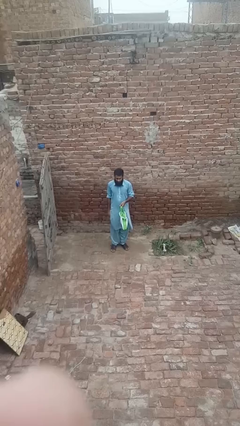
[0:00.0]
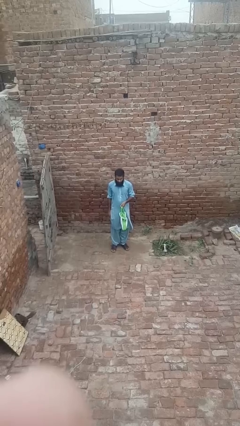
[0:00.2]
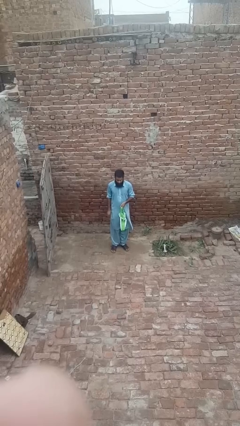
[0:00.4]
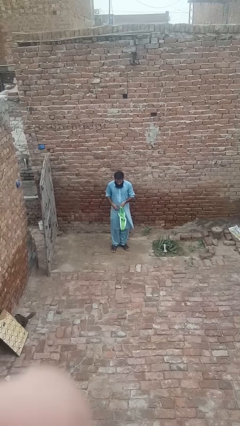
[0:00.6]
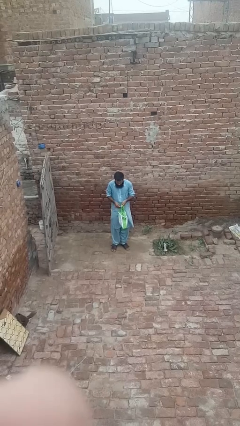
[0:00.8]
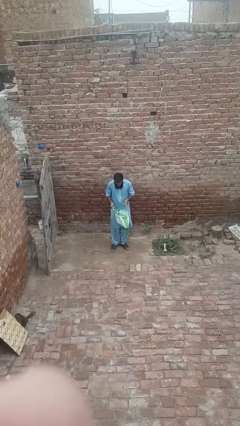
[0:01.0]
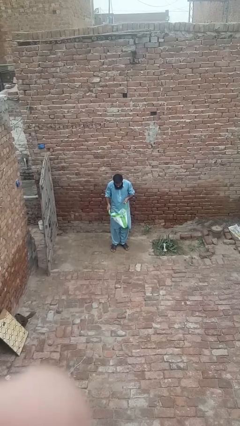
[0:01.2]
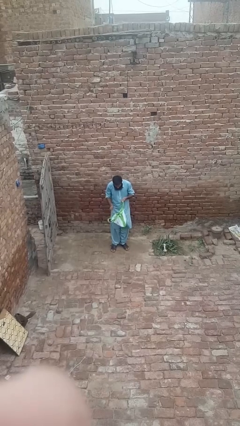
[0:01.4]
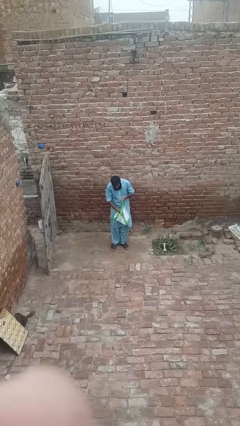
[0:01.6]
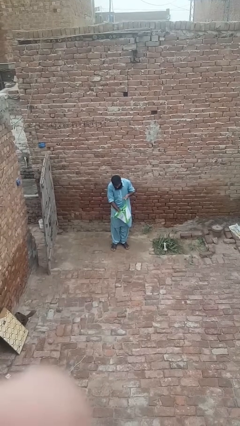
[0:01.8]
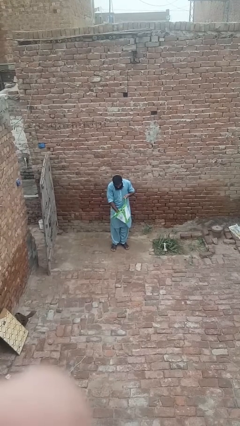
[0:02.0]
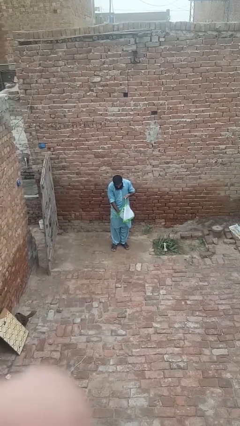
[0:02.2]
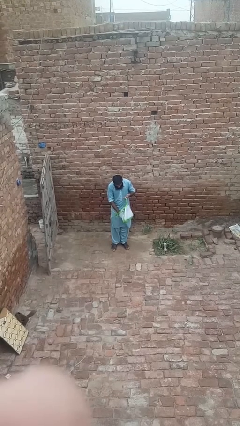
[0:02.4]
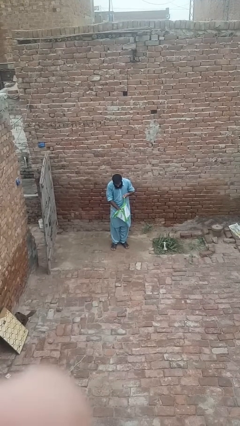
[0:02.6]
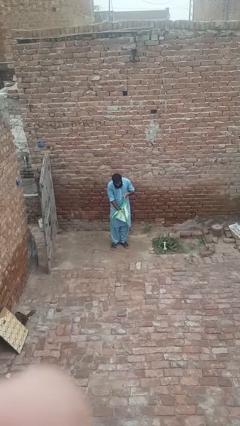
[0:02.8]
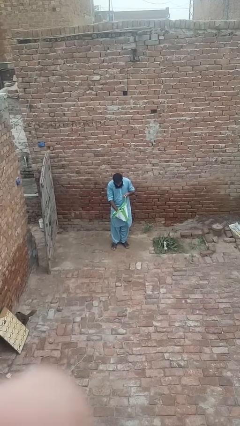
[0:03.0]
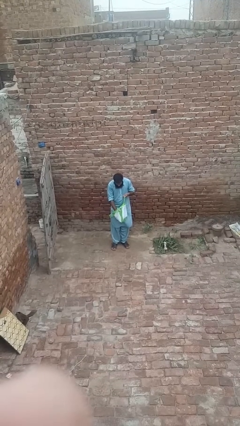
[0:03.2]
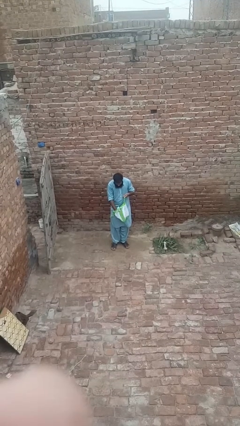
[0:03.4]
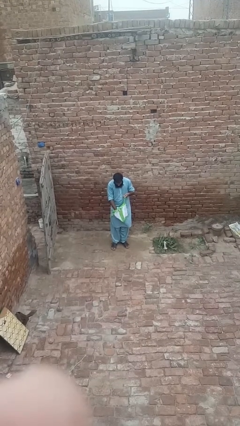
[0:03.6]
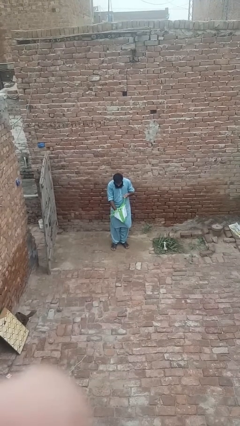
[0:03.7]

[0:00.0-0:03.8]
person searches in bag

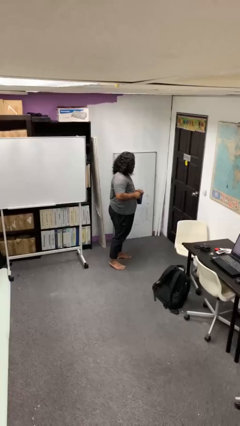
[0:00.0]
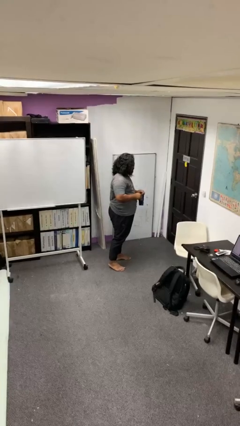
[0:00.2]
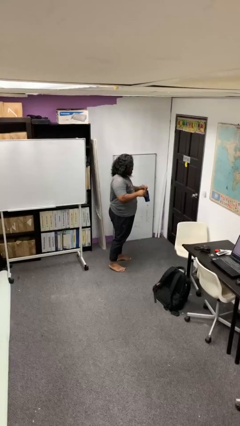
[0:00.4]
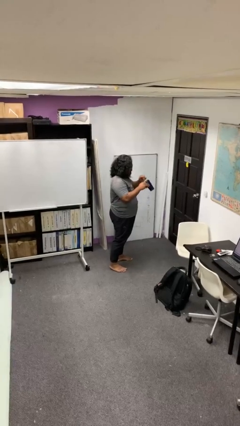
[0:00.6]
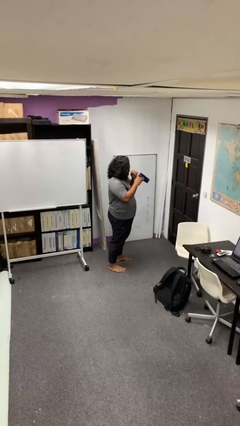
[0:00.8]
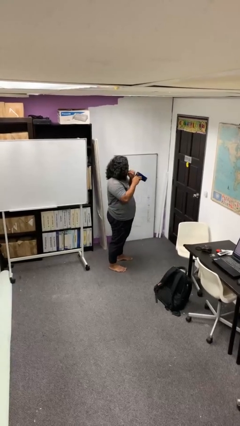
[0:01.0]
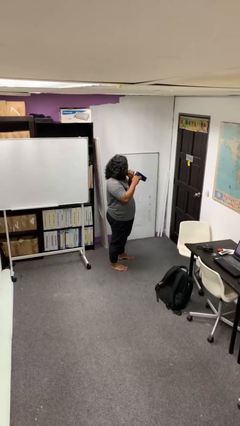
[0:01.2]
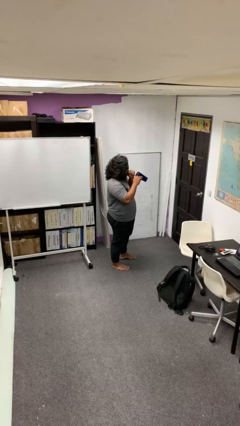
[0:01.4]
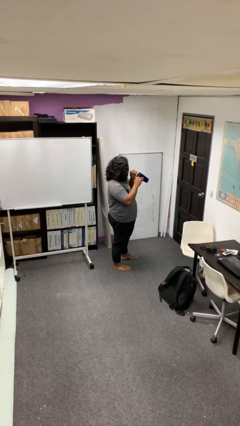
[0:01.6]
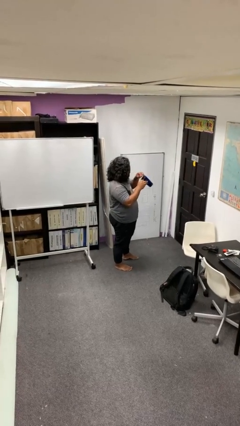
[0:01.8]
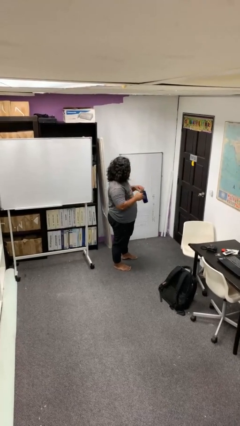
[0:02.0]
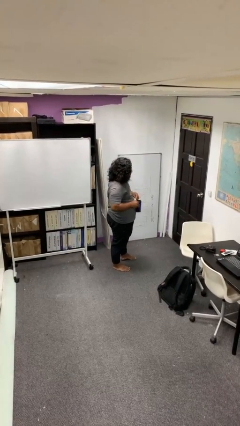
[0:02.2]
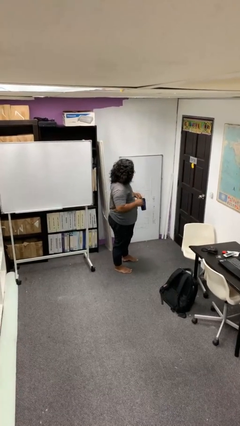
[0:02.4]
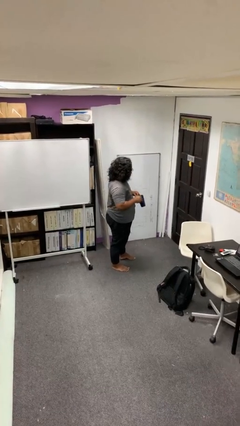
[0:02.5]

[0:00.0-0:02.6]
person drinks from straw

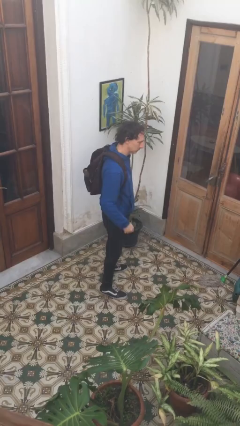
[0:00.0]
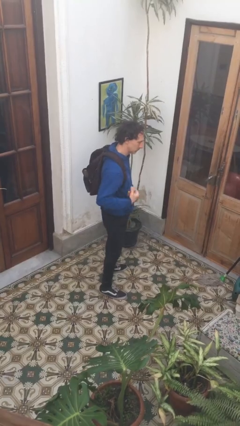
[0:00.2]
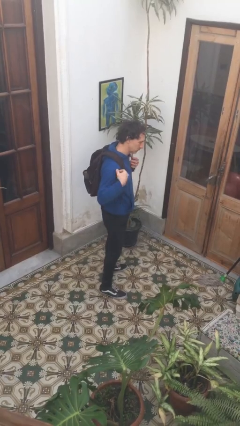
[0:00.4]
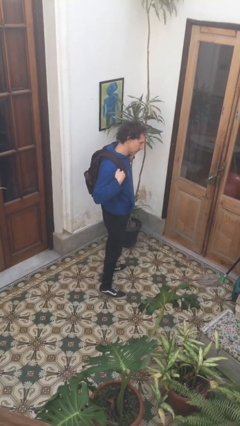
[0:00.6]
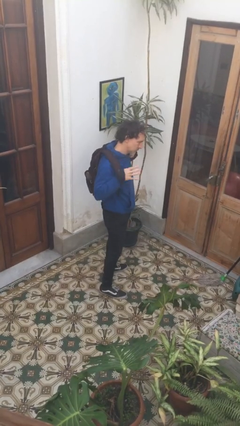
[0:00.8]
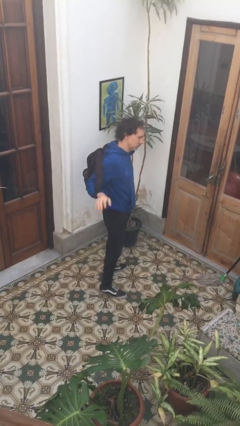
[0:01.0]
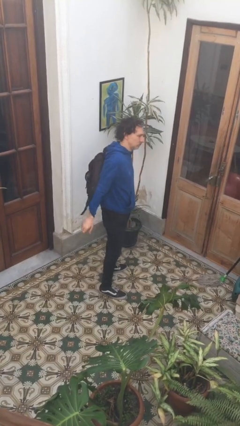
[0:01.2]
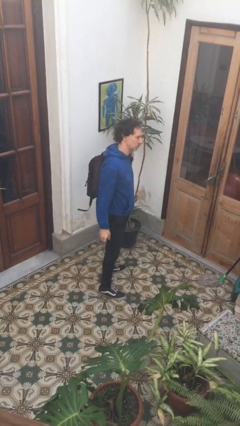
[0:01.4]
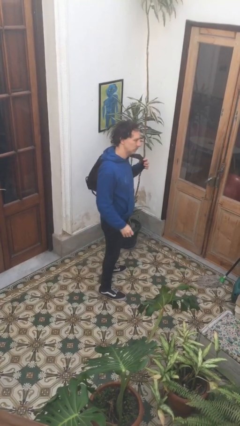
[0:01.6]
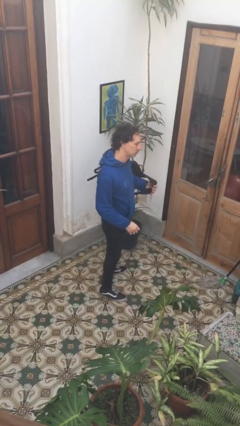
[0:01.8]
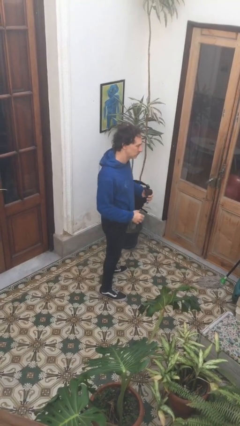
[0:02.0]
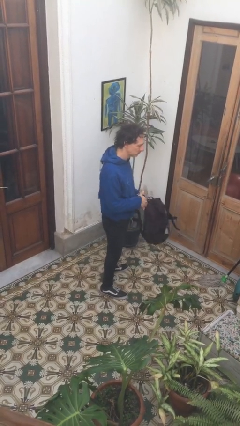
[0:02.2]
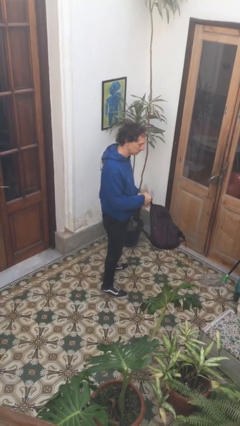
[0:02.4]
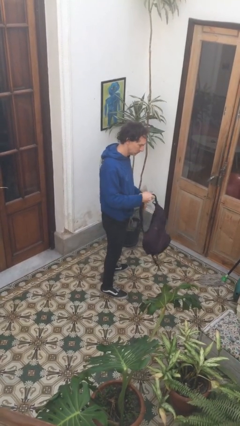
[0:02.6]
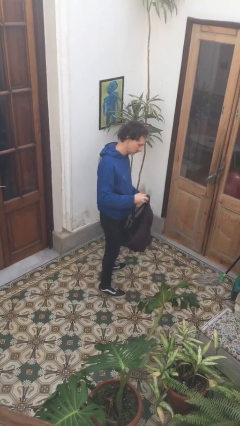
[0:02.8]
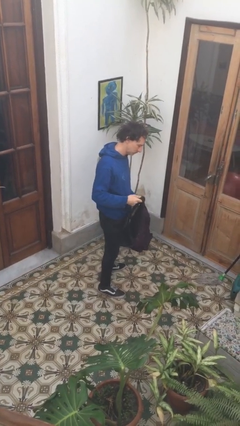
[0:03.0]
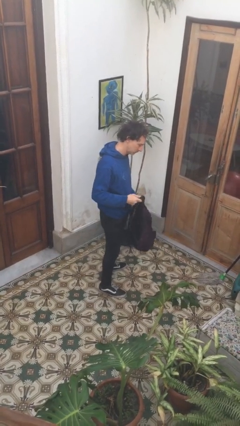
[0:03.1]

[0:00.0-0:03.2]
person takes off backpack

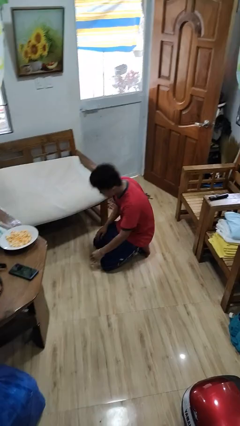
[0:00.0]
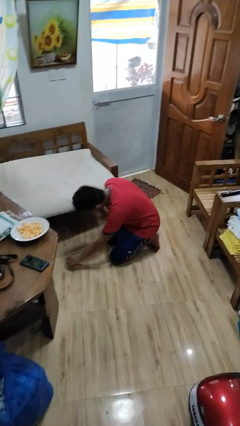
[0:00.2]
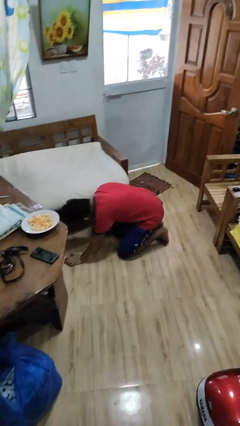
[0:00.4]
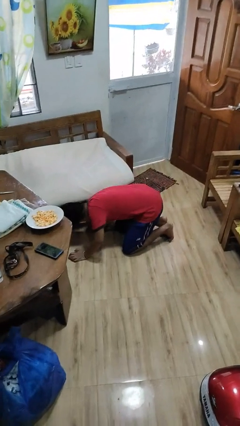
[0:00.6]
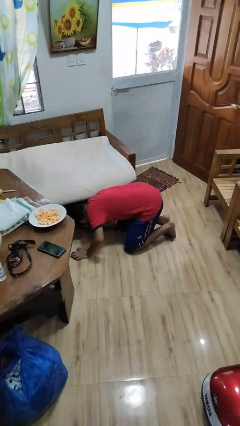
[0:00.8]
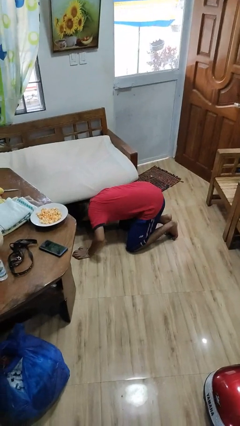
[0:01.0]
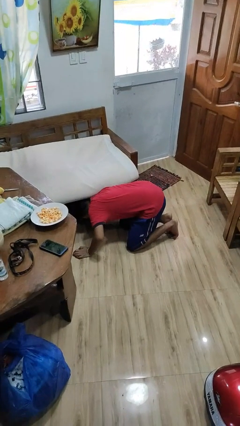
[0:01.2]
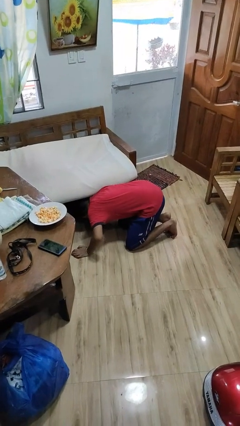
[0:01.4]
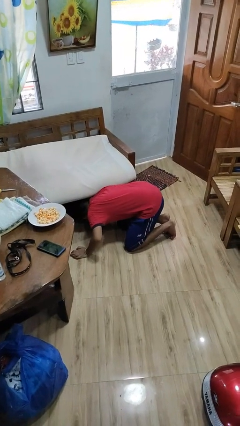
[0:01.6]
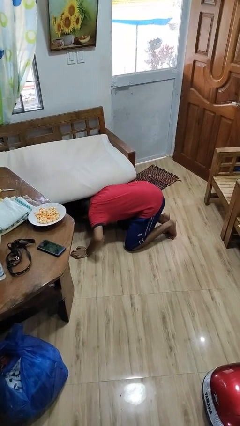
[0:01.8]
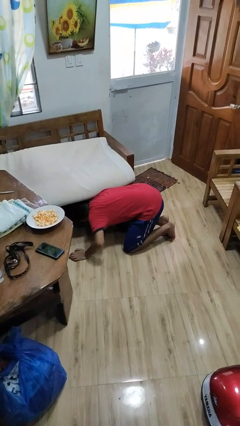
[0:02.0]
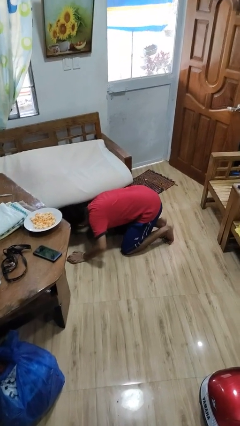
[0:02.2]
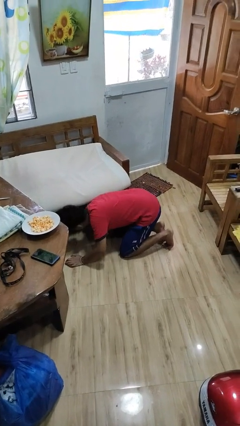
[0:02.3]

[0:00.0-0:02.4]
person searches under couch

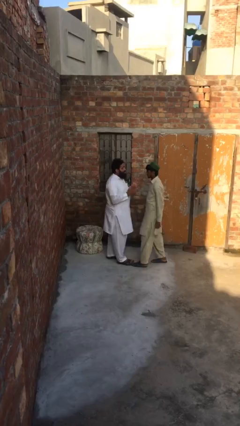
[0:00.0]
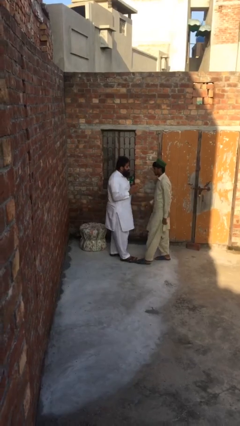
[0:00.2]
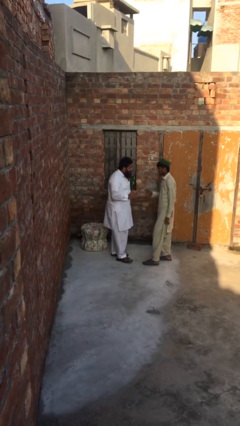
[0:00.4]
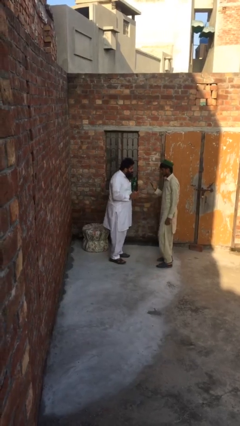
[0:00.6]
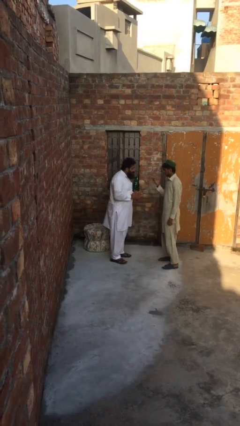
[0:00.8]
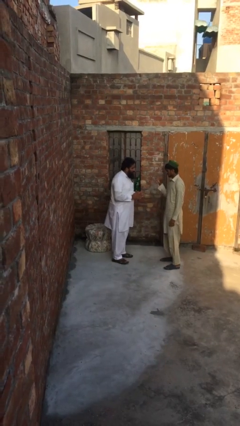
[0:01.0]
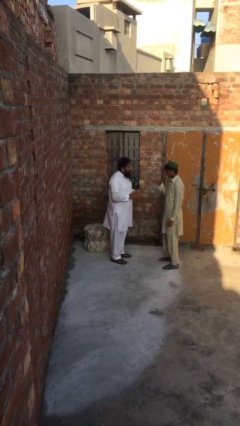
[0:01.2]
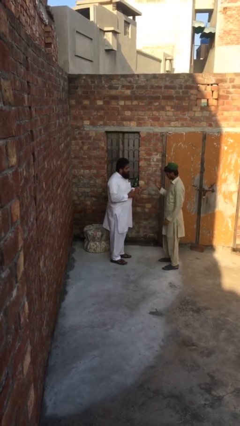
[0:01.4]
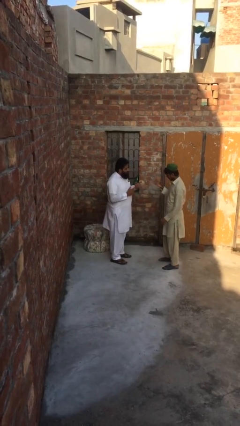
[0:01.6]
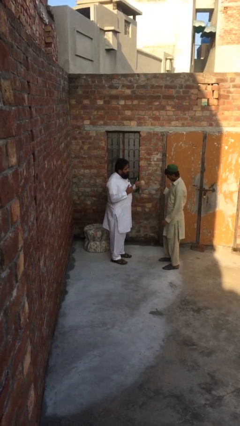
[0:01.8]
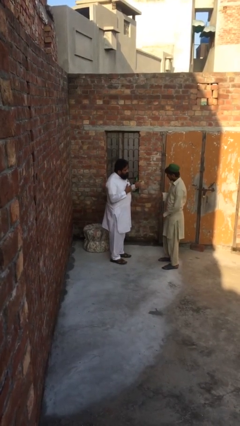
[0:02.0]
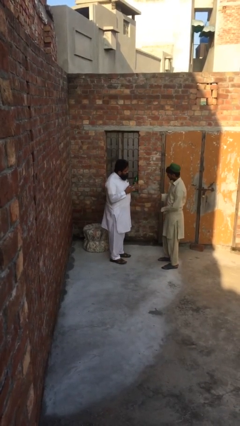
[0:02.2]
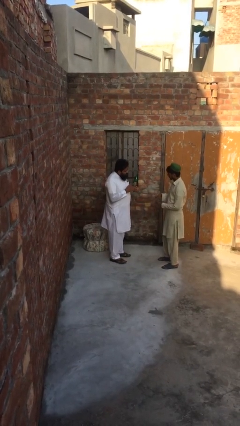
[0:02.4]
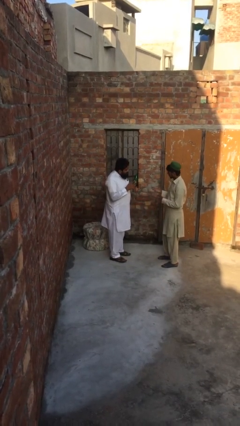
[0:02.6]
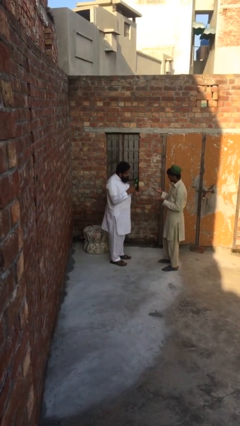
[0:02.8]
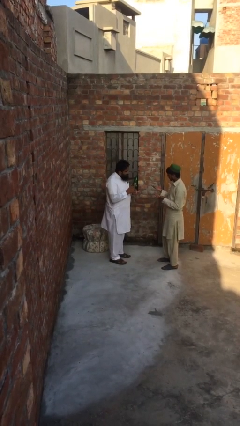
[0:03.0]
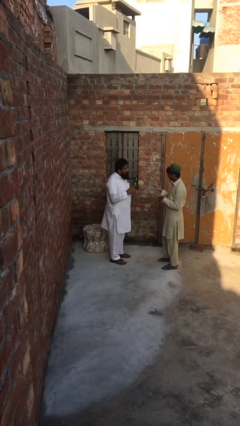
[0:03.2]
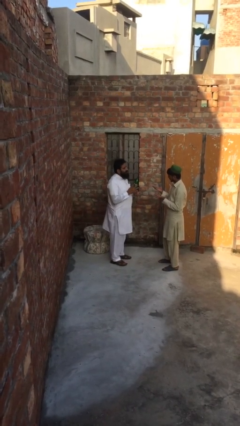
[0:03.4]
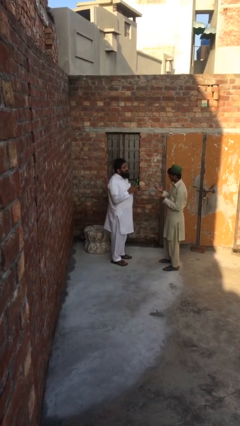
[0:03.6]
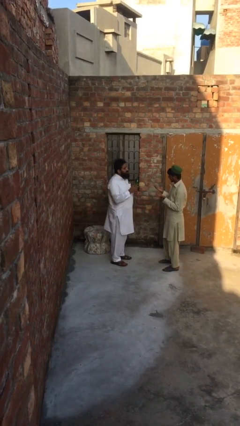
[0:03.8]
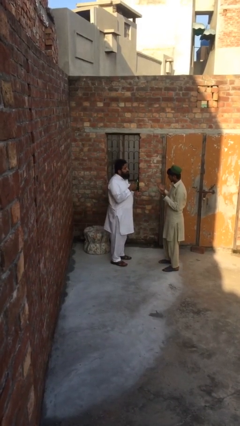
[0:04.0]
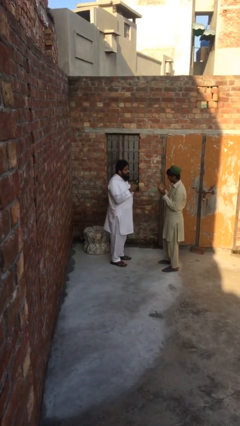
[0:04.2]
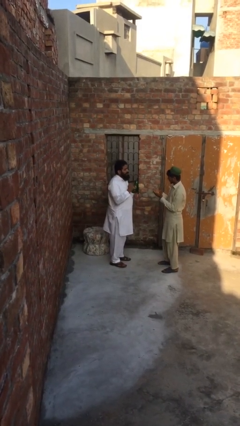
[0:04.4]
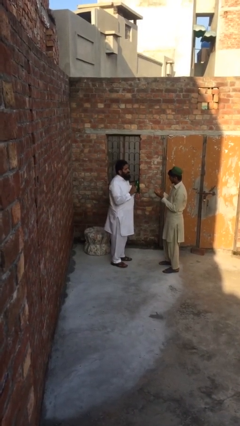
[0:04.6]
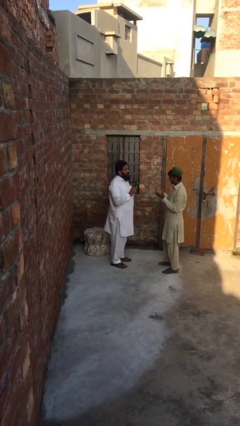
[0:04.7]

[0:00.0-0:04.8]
person talks to person

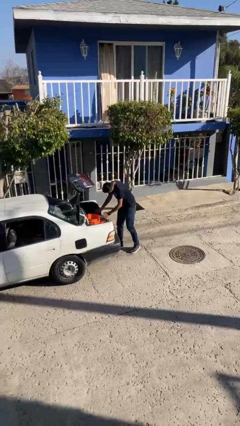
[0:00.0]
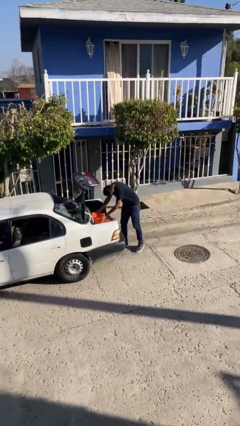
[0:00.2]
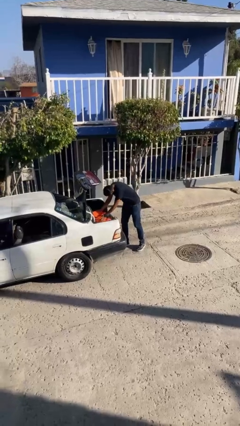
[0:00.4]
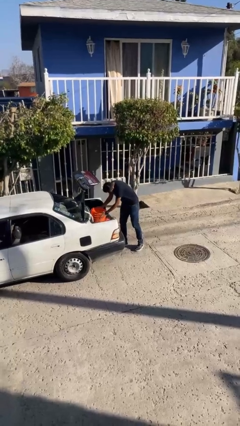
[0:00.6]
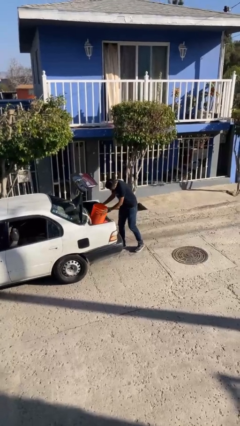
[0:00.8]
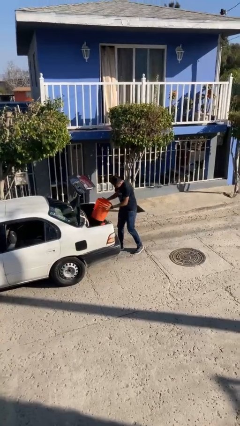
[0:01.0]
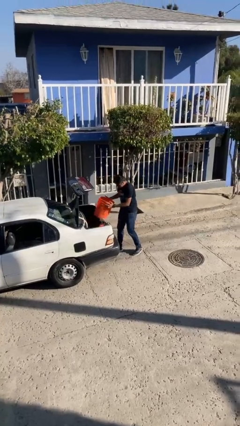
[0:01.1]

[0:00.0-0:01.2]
person unloads car
